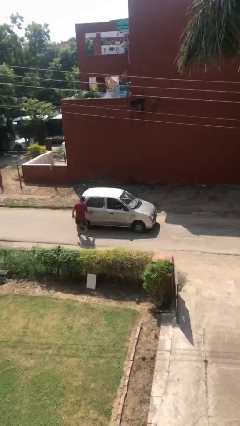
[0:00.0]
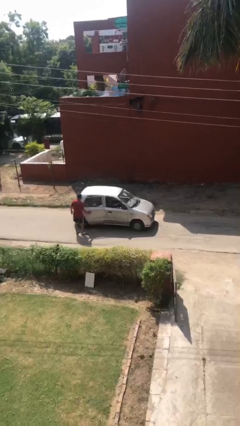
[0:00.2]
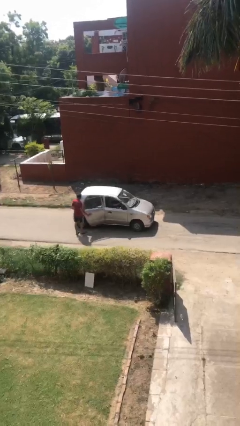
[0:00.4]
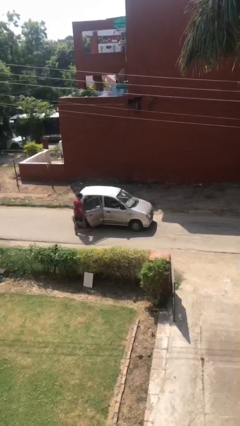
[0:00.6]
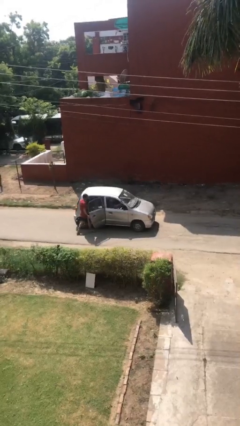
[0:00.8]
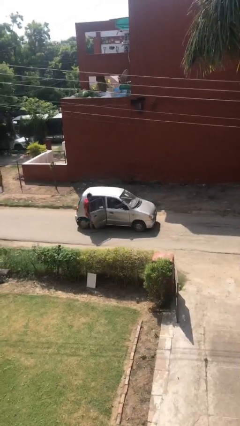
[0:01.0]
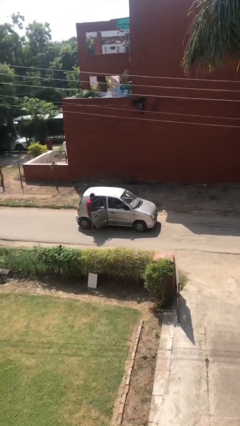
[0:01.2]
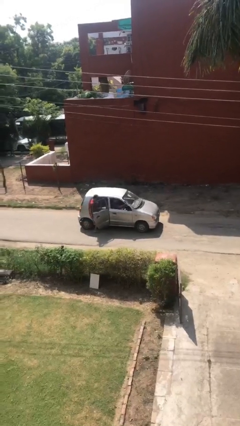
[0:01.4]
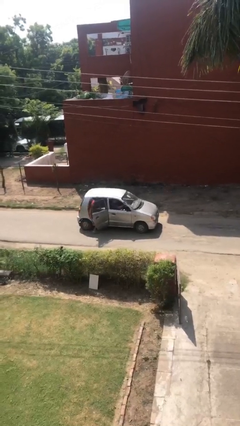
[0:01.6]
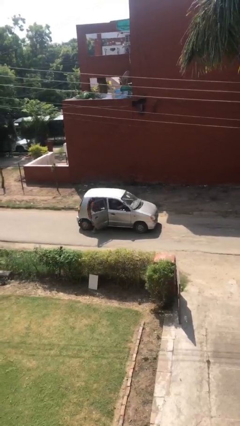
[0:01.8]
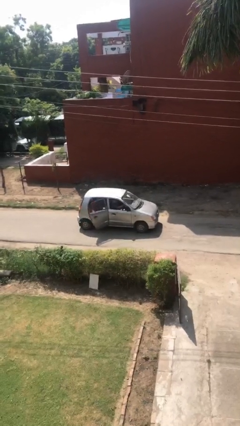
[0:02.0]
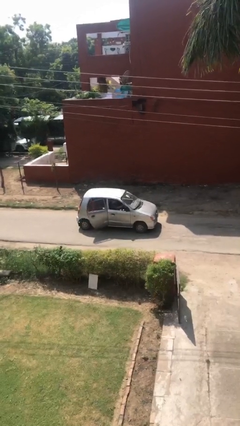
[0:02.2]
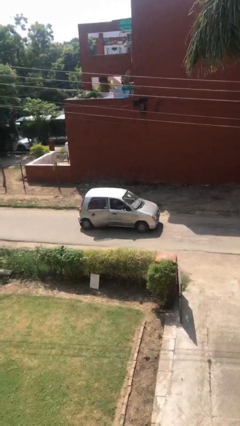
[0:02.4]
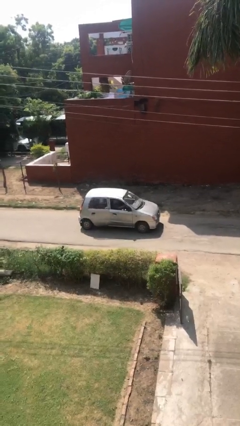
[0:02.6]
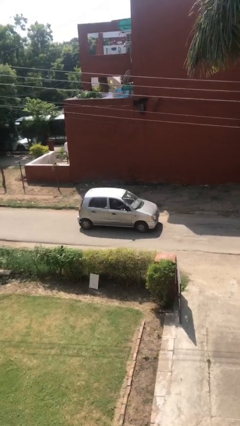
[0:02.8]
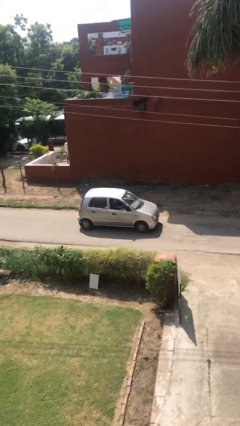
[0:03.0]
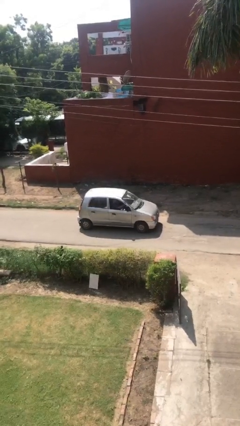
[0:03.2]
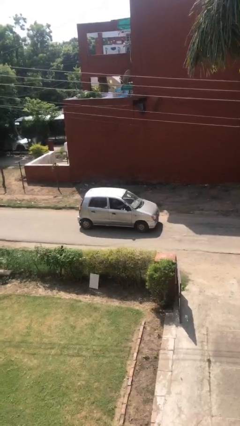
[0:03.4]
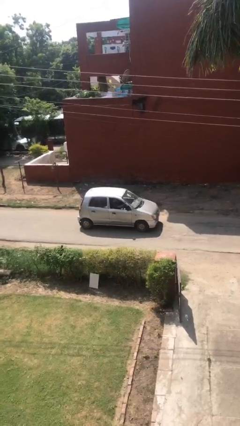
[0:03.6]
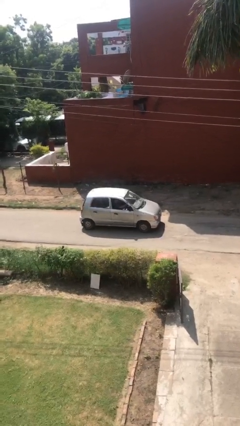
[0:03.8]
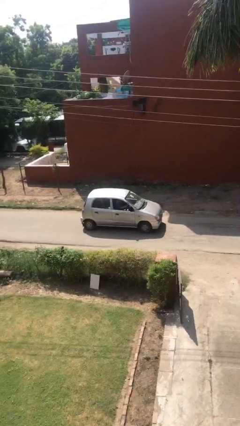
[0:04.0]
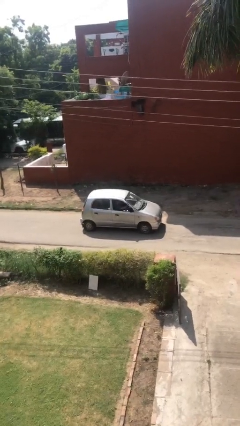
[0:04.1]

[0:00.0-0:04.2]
car picks up person

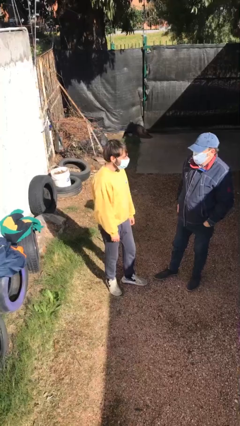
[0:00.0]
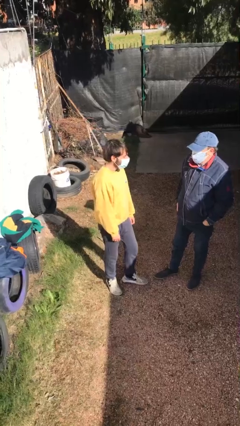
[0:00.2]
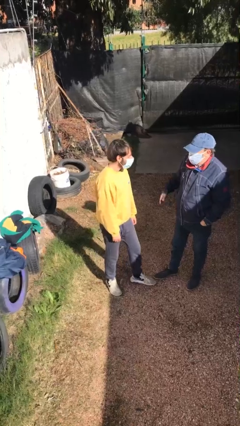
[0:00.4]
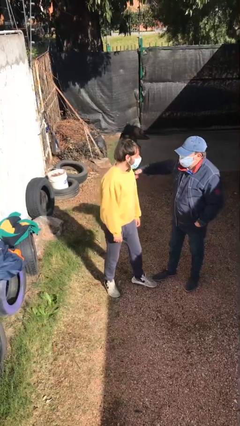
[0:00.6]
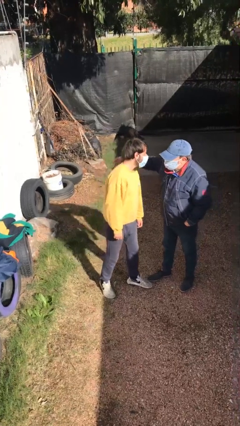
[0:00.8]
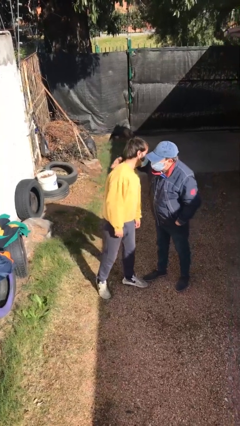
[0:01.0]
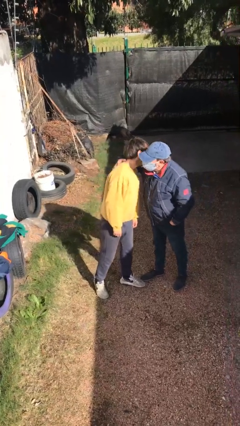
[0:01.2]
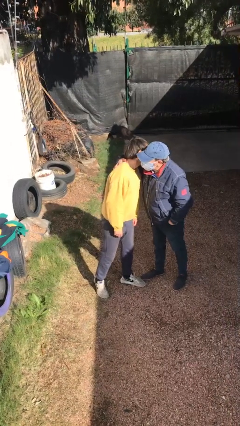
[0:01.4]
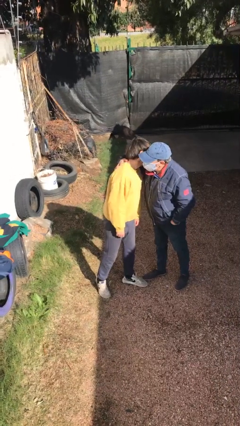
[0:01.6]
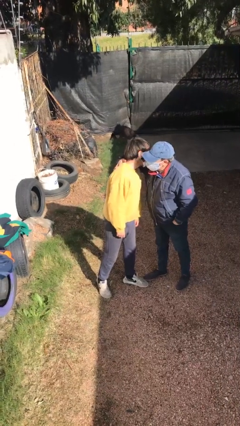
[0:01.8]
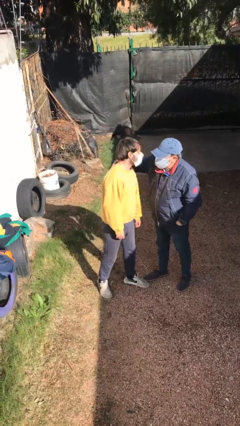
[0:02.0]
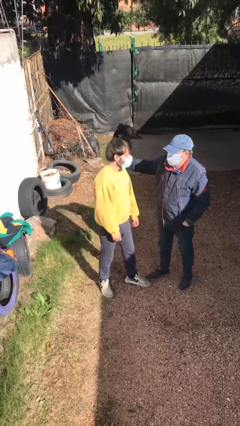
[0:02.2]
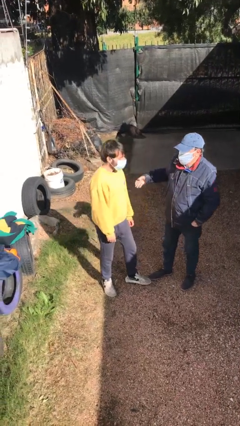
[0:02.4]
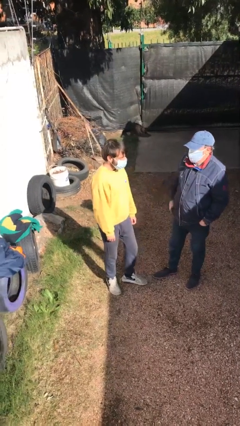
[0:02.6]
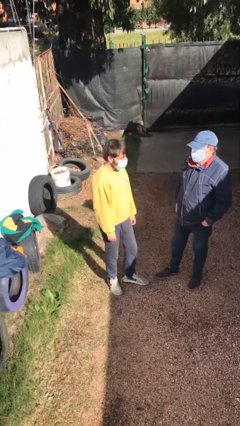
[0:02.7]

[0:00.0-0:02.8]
person kisses cheek of person

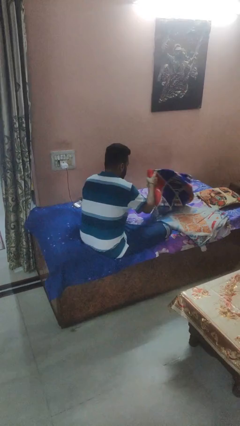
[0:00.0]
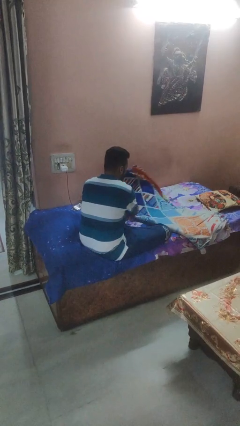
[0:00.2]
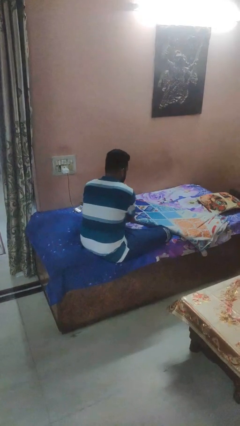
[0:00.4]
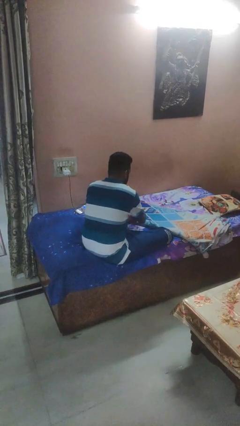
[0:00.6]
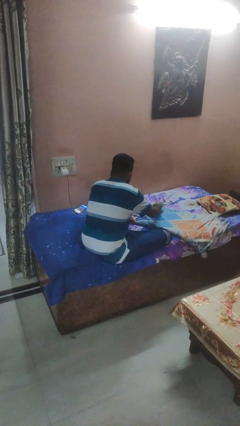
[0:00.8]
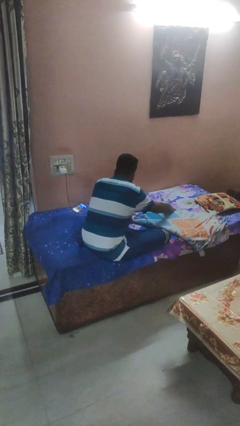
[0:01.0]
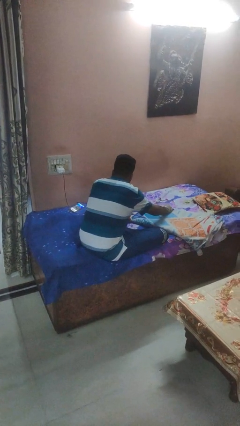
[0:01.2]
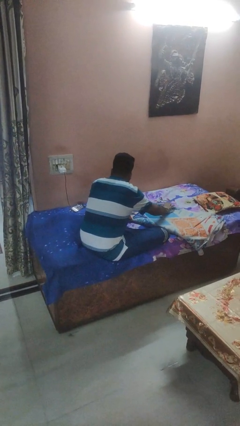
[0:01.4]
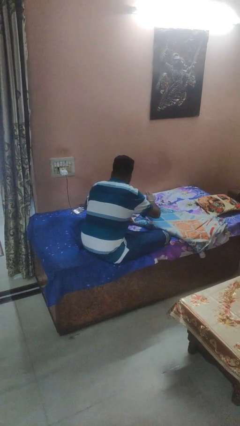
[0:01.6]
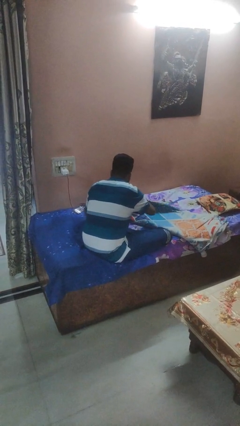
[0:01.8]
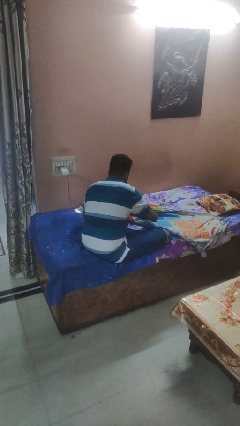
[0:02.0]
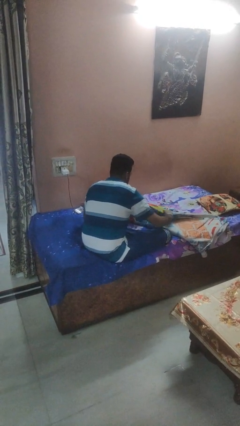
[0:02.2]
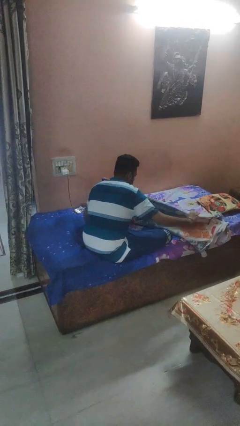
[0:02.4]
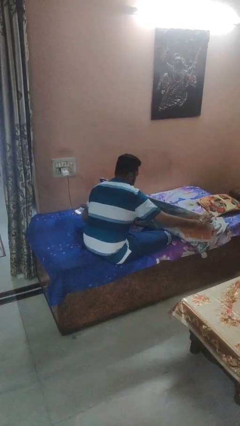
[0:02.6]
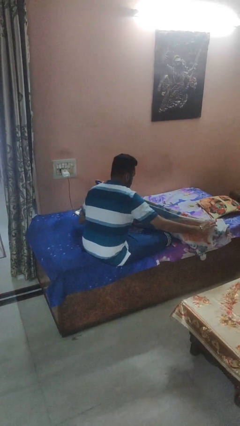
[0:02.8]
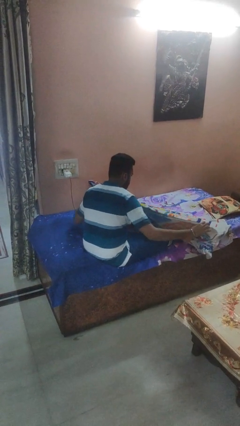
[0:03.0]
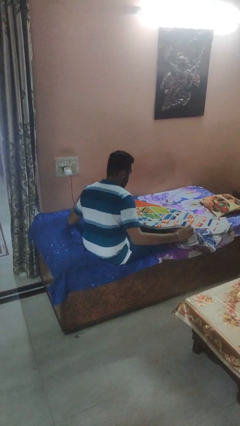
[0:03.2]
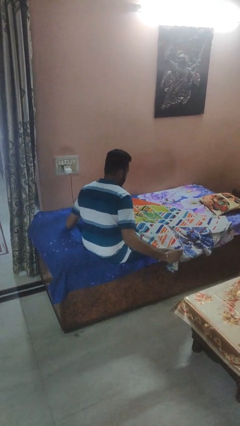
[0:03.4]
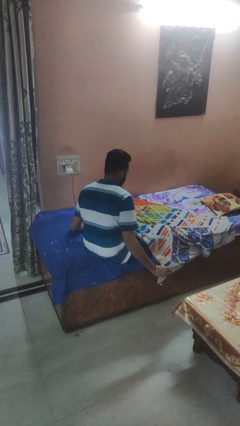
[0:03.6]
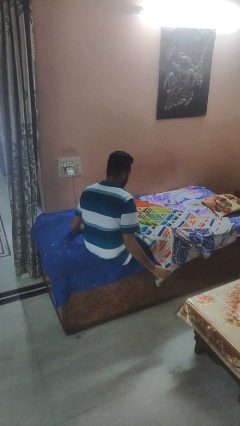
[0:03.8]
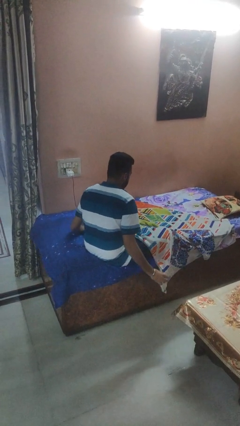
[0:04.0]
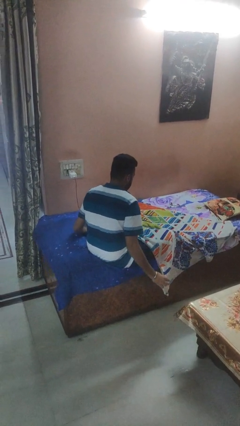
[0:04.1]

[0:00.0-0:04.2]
person unfolds blanket

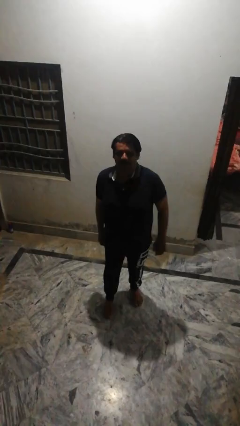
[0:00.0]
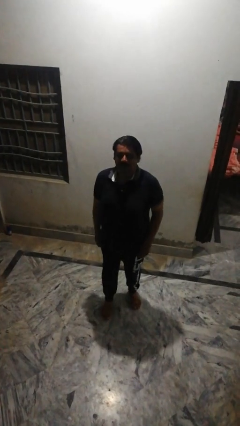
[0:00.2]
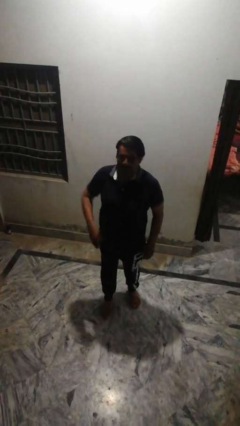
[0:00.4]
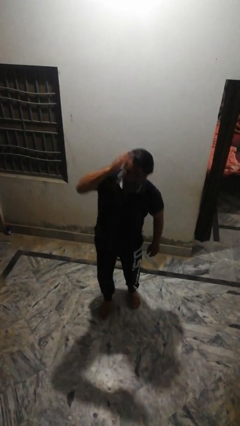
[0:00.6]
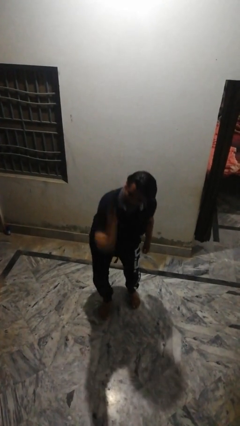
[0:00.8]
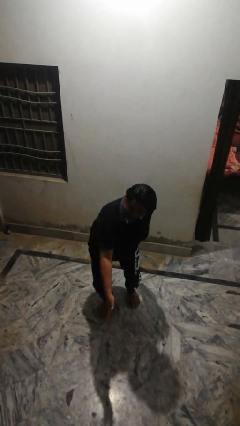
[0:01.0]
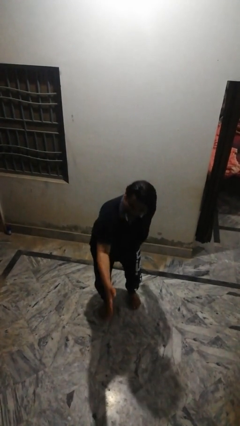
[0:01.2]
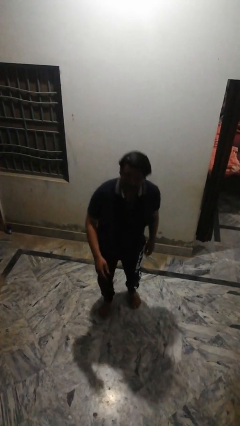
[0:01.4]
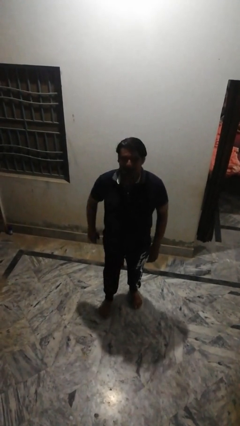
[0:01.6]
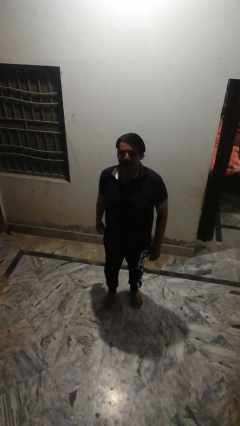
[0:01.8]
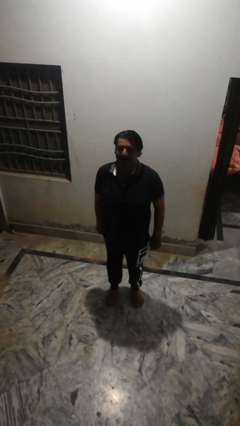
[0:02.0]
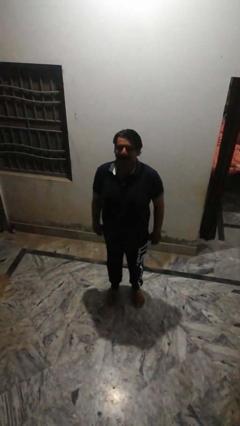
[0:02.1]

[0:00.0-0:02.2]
person karate chop

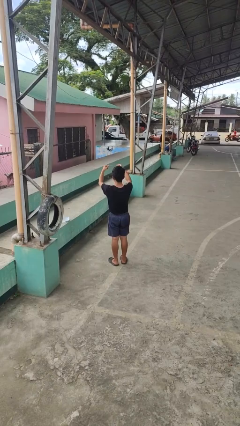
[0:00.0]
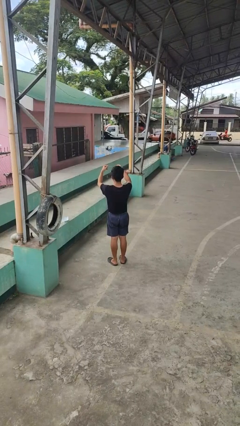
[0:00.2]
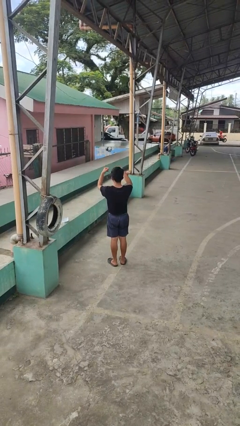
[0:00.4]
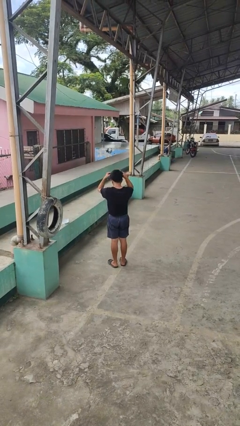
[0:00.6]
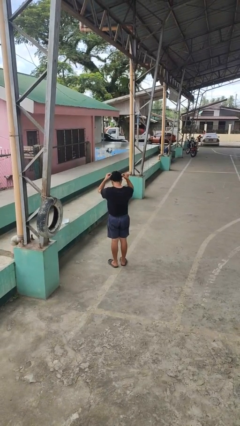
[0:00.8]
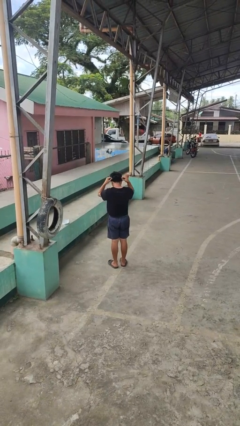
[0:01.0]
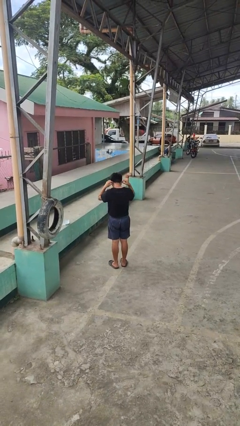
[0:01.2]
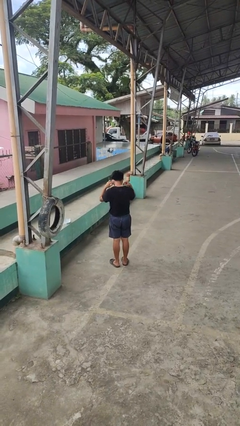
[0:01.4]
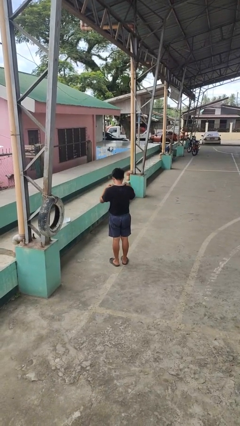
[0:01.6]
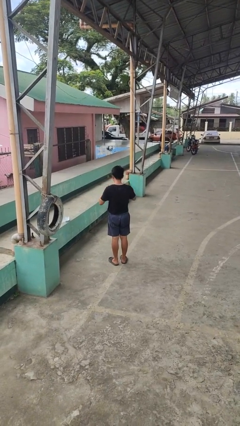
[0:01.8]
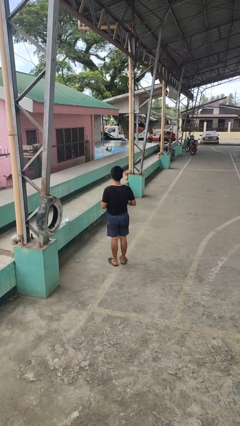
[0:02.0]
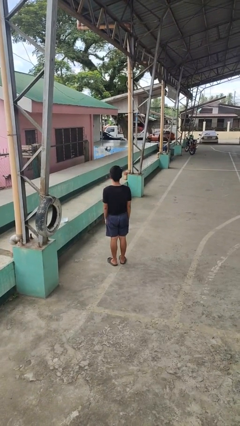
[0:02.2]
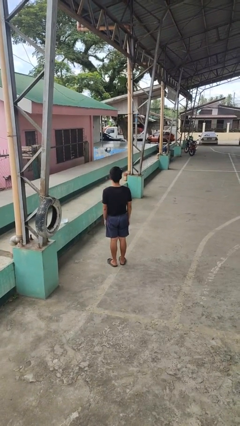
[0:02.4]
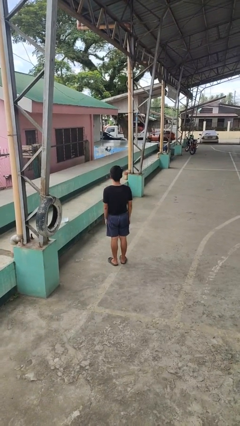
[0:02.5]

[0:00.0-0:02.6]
person puts on necklace

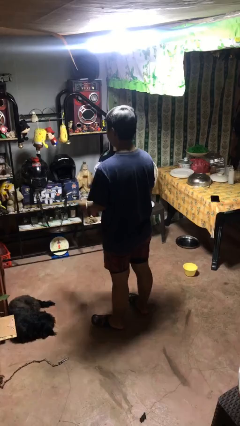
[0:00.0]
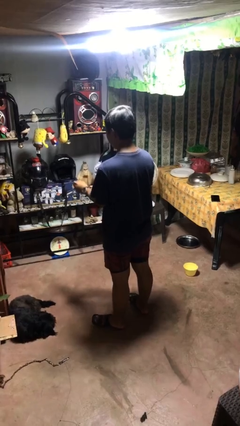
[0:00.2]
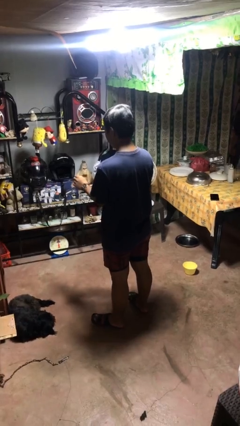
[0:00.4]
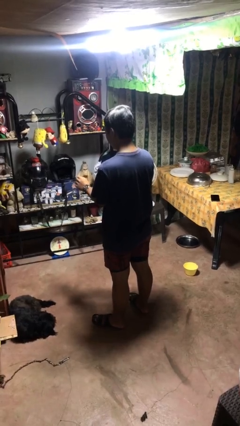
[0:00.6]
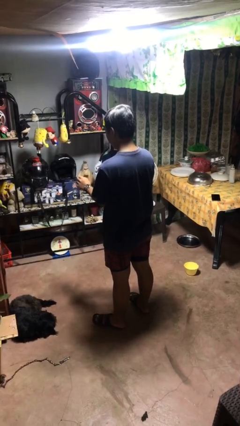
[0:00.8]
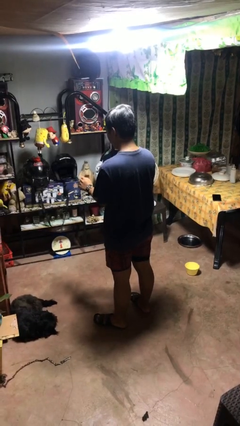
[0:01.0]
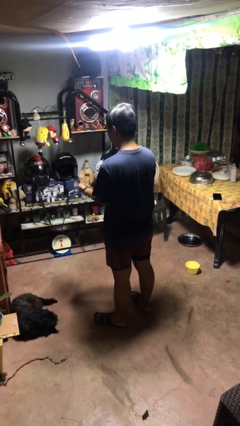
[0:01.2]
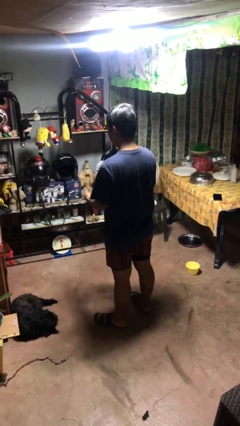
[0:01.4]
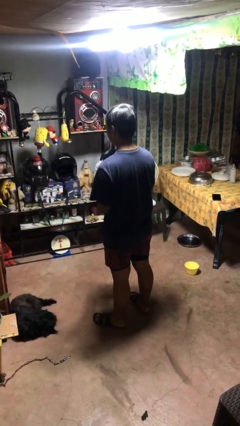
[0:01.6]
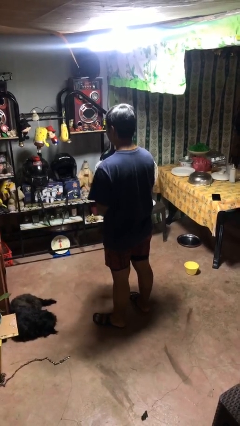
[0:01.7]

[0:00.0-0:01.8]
person takes off wristwatch
